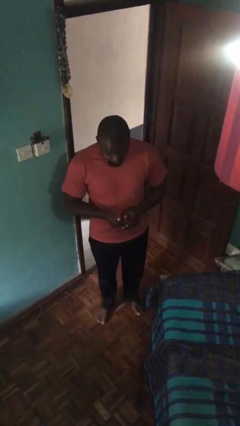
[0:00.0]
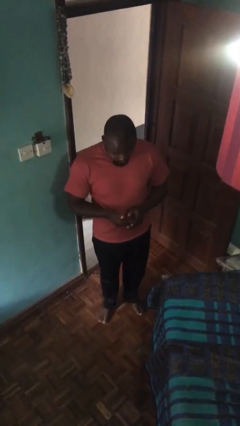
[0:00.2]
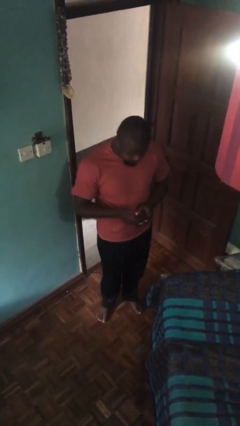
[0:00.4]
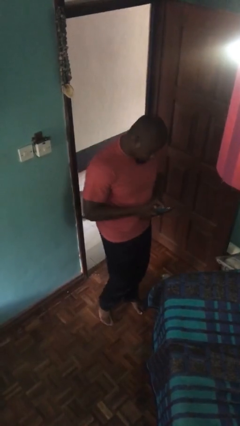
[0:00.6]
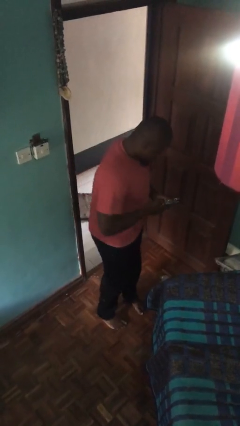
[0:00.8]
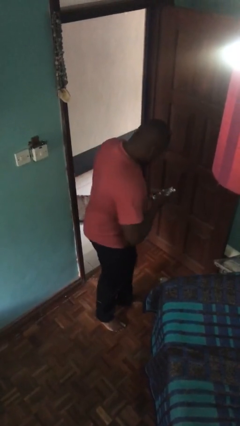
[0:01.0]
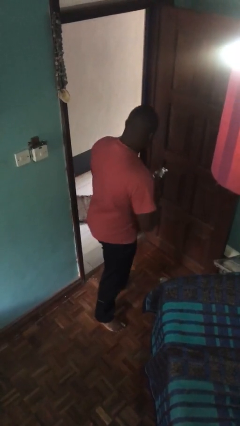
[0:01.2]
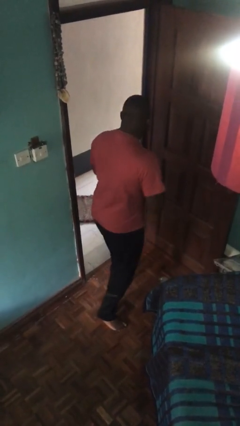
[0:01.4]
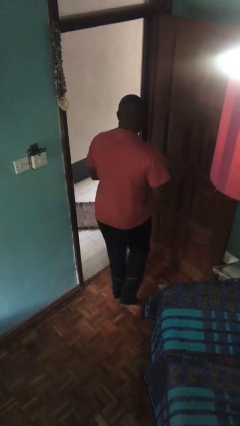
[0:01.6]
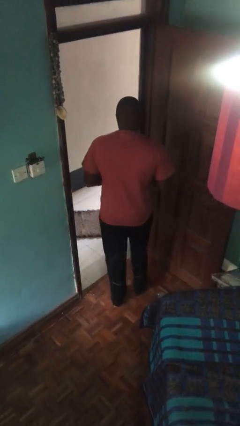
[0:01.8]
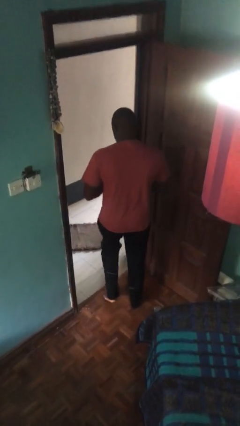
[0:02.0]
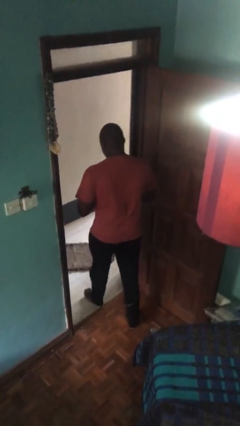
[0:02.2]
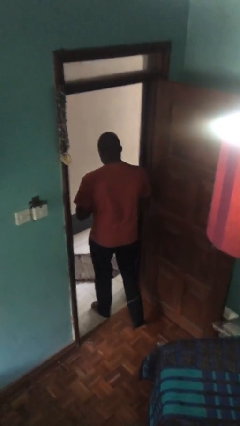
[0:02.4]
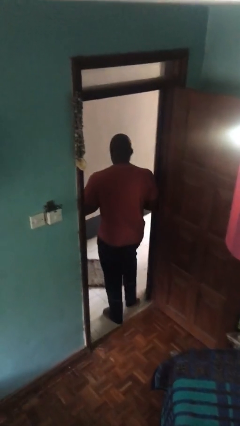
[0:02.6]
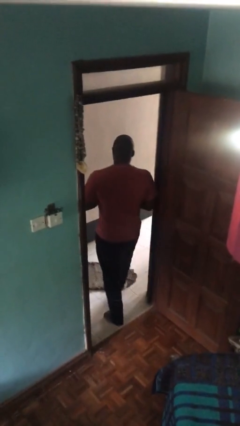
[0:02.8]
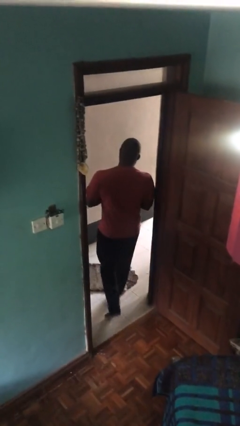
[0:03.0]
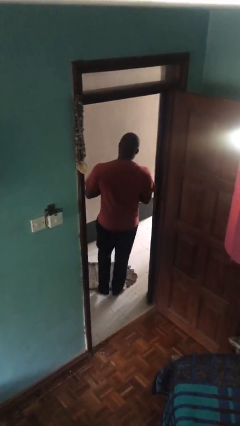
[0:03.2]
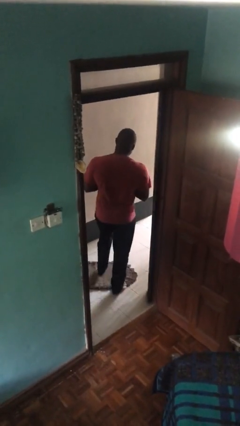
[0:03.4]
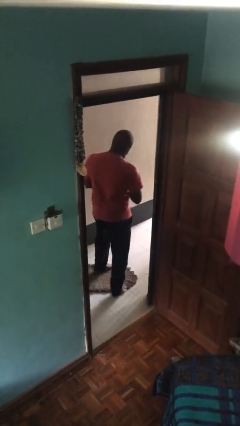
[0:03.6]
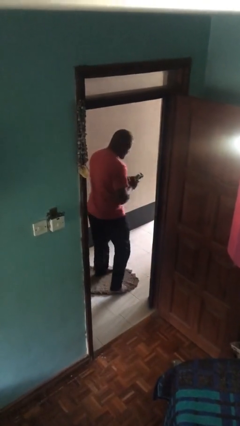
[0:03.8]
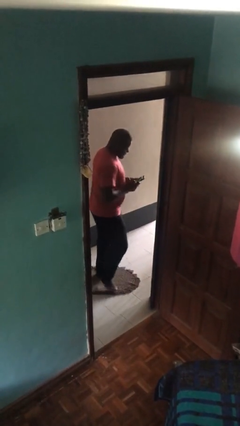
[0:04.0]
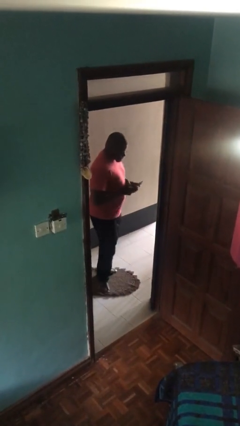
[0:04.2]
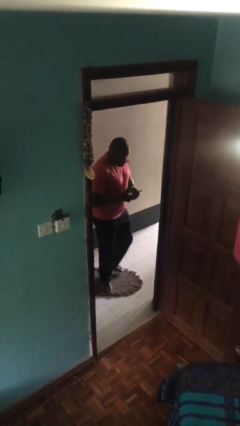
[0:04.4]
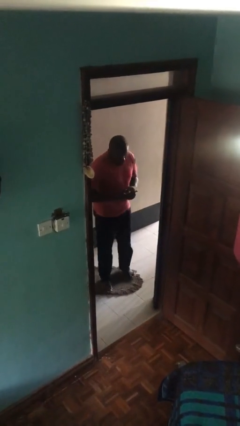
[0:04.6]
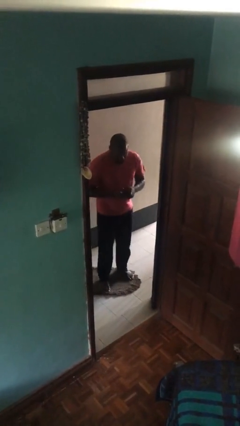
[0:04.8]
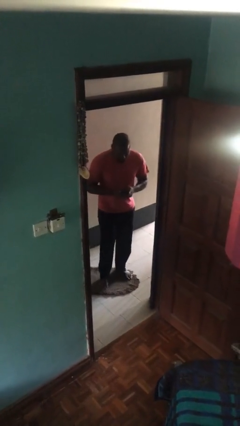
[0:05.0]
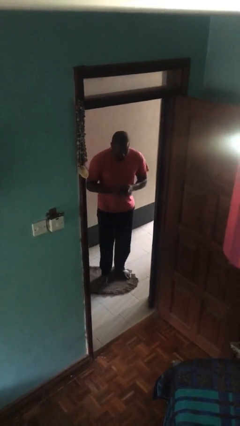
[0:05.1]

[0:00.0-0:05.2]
person exits scene through structure

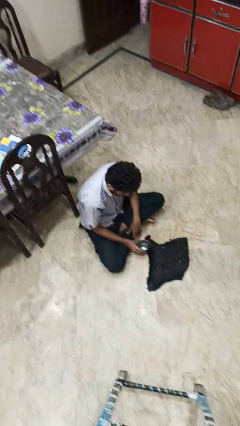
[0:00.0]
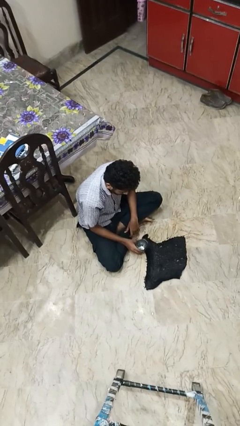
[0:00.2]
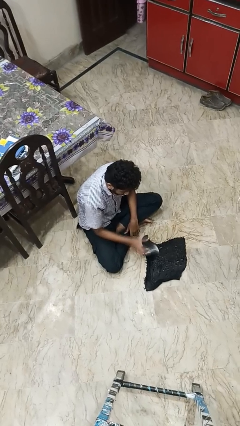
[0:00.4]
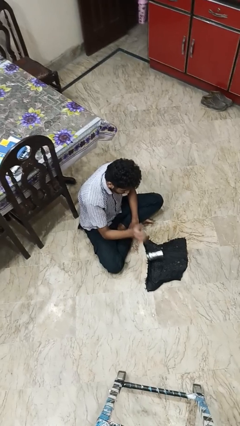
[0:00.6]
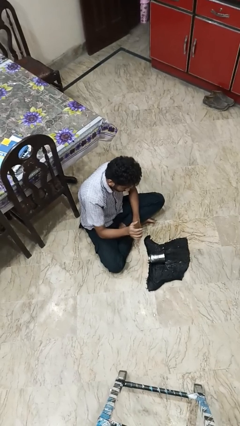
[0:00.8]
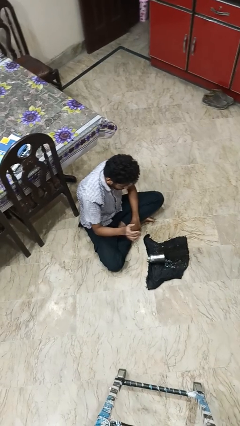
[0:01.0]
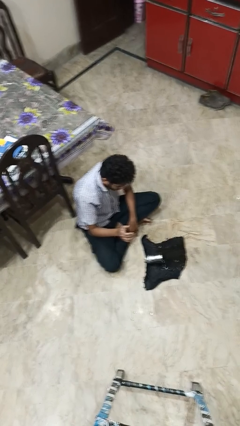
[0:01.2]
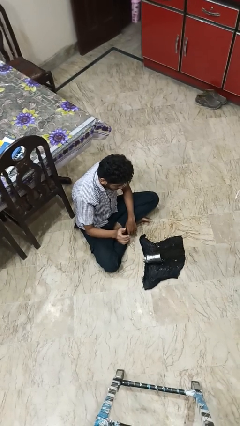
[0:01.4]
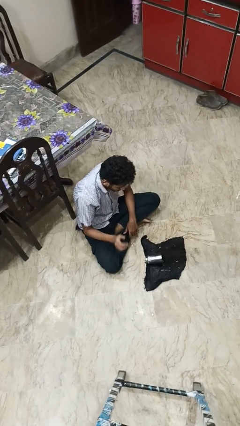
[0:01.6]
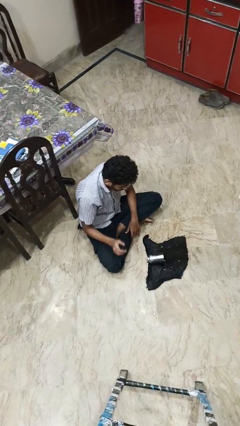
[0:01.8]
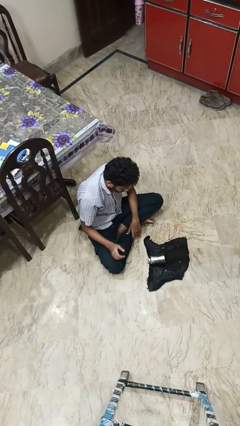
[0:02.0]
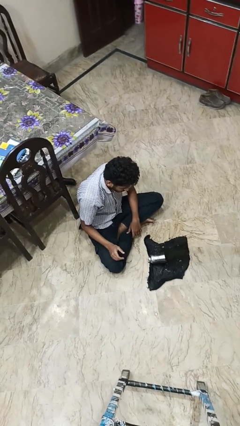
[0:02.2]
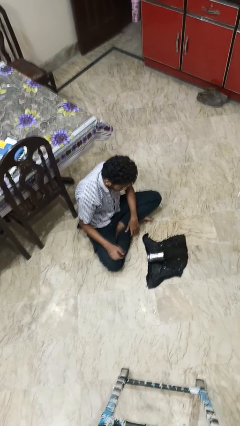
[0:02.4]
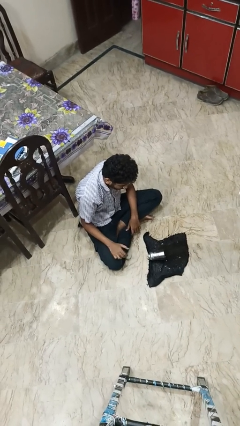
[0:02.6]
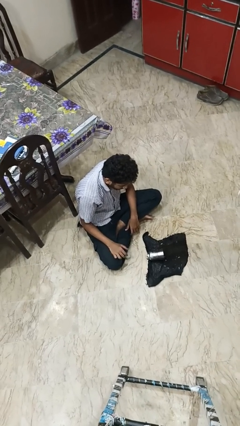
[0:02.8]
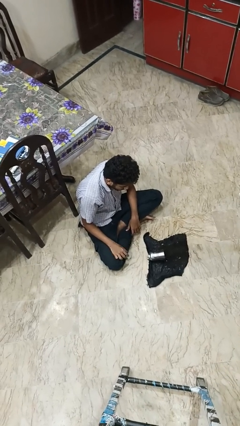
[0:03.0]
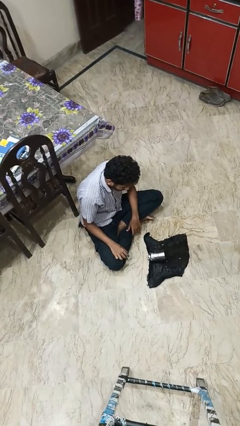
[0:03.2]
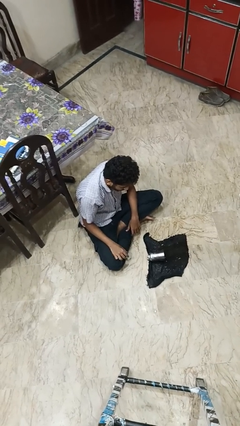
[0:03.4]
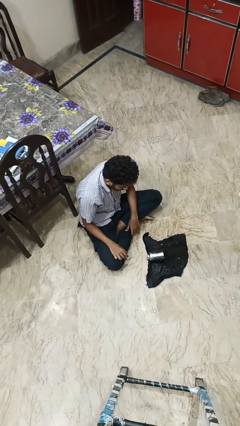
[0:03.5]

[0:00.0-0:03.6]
person spills on floor

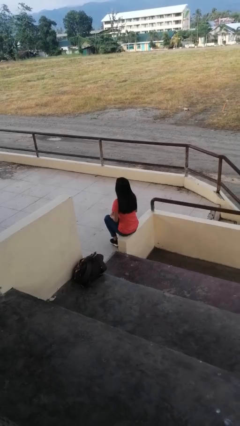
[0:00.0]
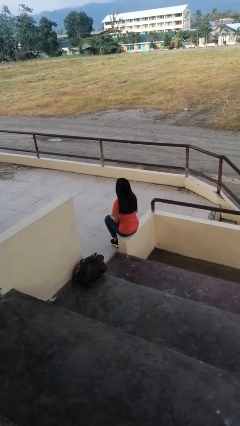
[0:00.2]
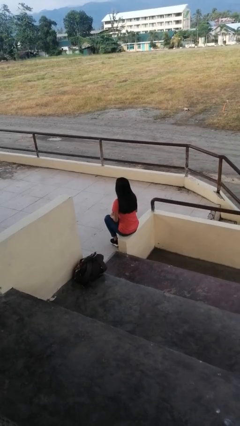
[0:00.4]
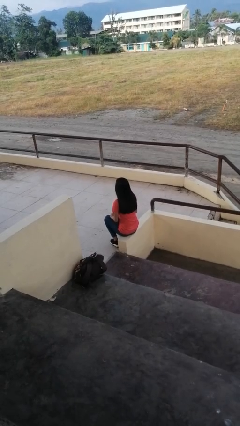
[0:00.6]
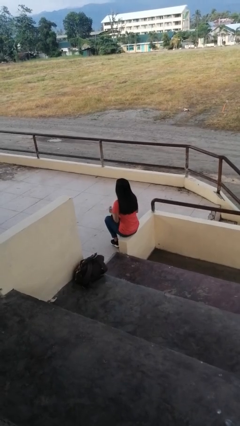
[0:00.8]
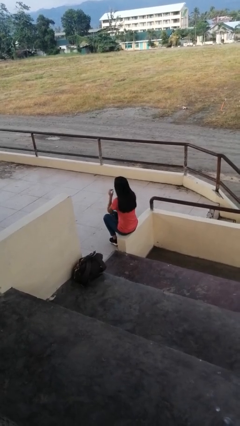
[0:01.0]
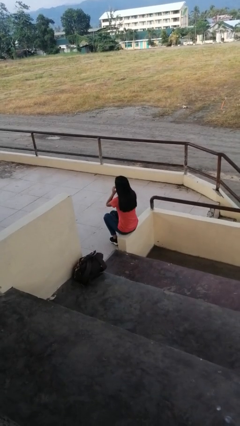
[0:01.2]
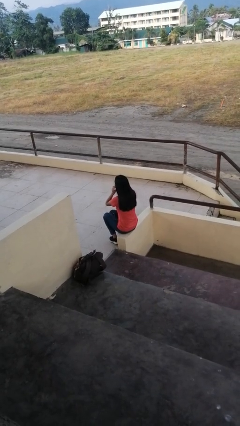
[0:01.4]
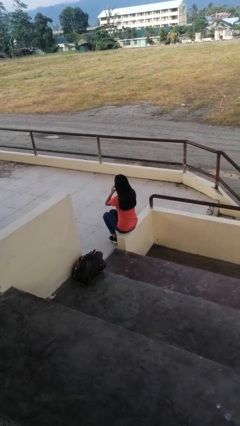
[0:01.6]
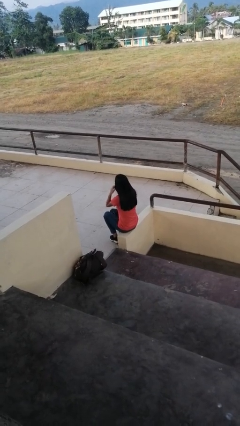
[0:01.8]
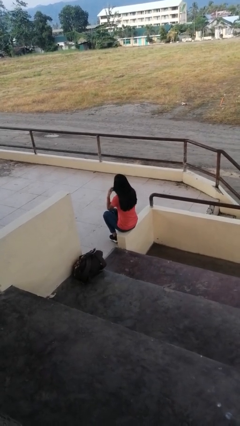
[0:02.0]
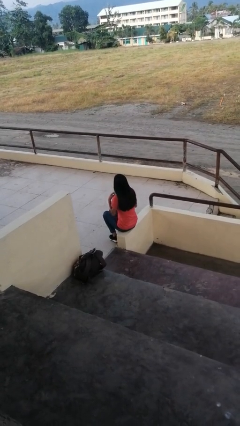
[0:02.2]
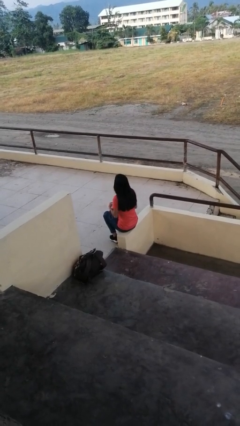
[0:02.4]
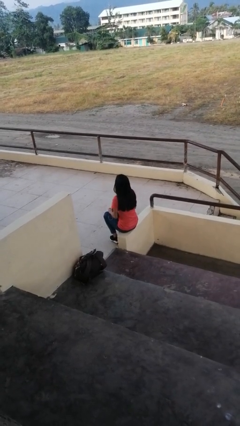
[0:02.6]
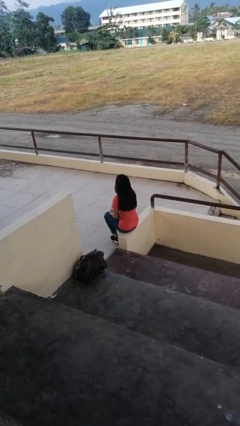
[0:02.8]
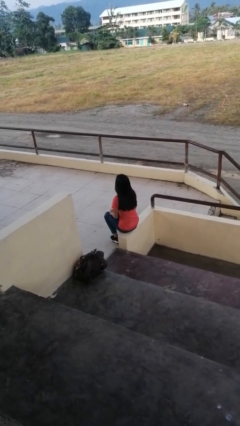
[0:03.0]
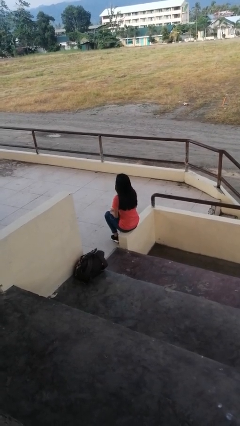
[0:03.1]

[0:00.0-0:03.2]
person takes off headphones

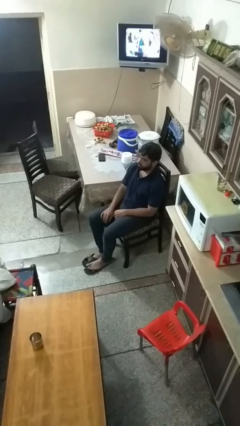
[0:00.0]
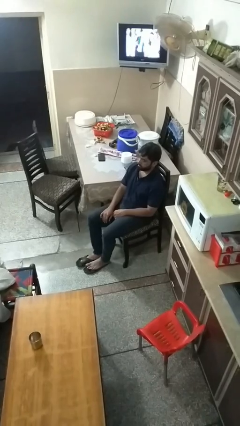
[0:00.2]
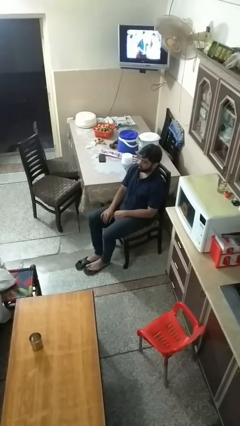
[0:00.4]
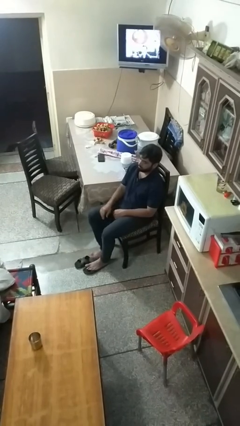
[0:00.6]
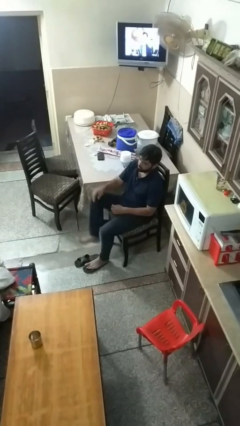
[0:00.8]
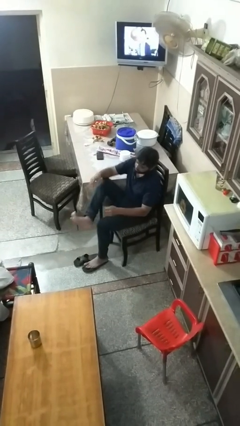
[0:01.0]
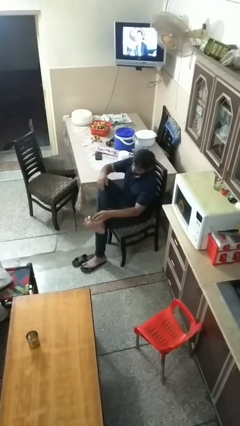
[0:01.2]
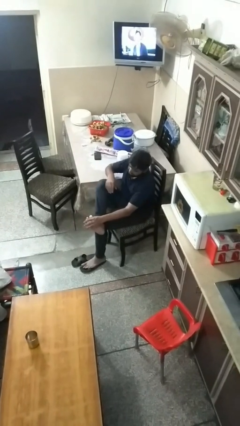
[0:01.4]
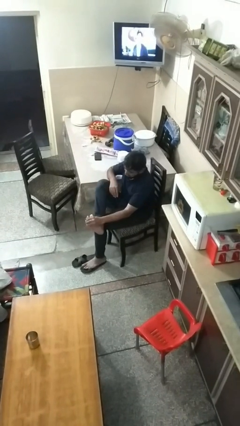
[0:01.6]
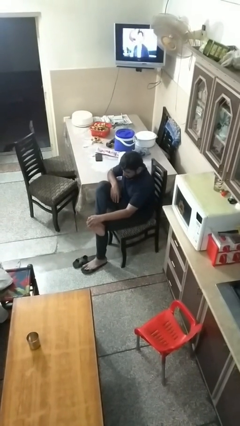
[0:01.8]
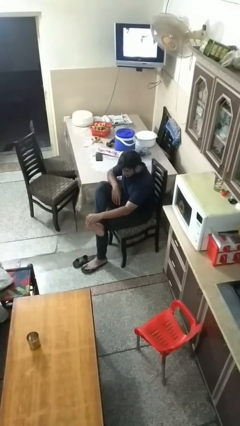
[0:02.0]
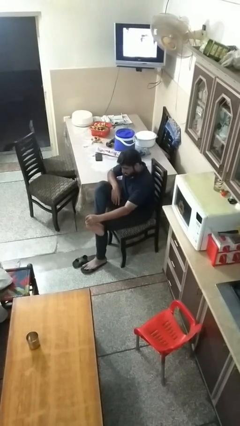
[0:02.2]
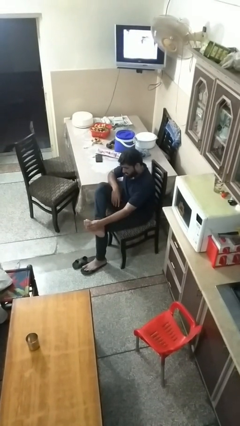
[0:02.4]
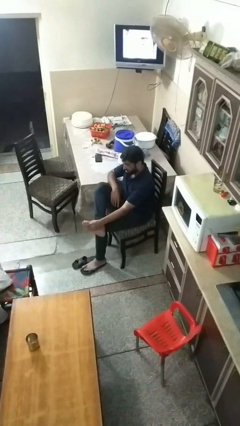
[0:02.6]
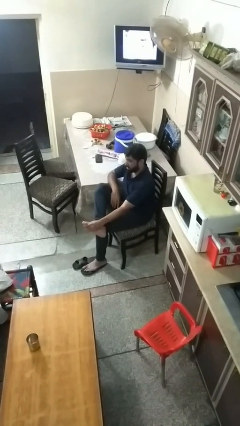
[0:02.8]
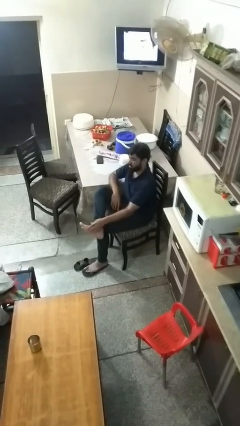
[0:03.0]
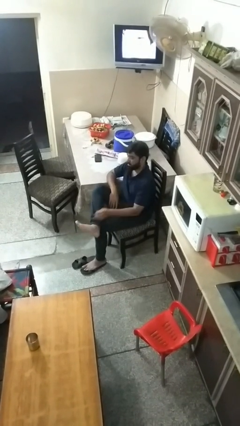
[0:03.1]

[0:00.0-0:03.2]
person rubs foot

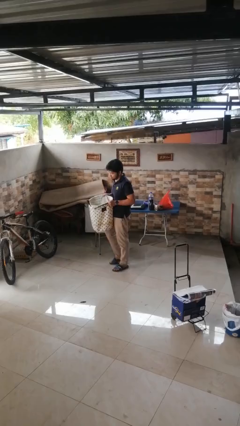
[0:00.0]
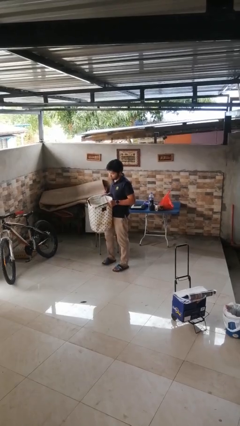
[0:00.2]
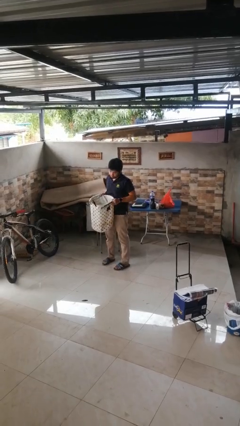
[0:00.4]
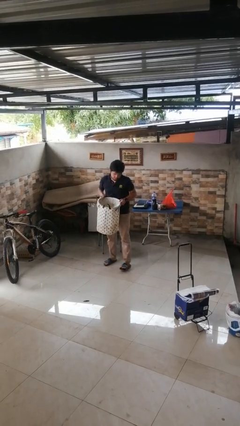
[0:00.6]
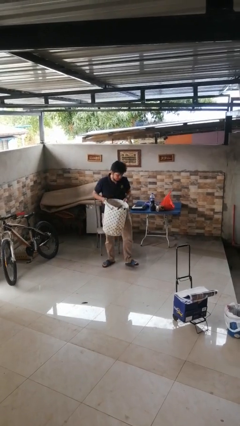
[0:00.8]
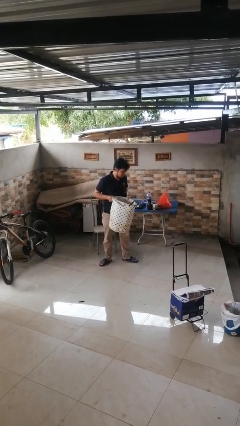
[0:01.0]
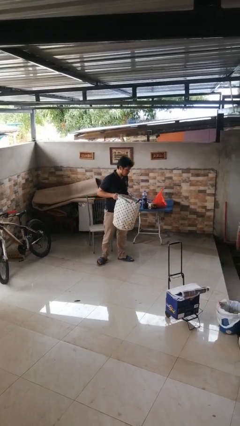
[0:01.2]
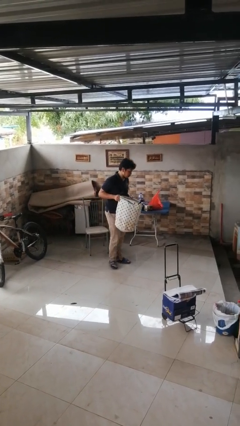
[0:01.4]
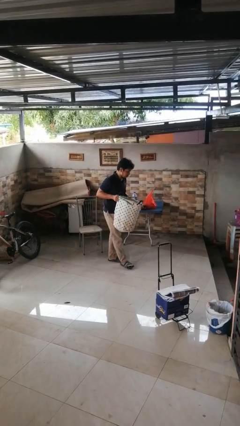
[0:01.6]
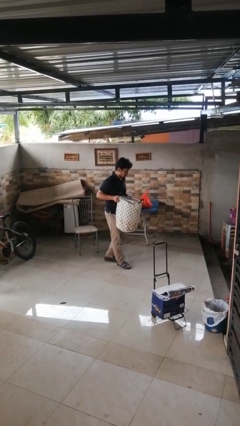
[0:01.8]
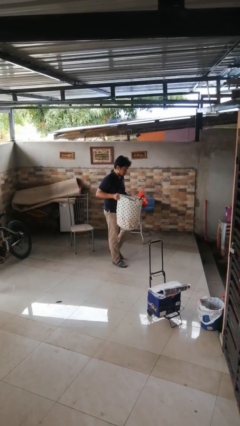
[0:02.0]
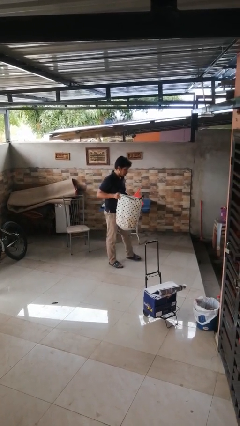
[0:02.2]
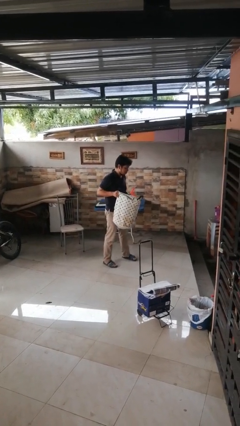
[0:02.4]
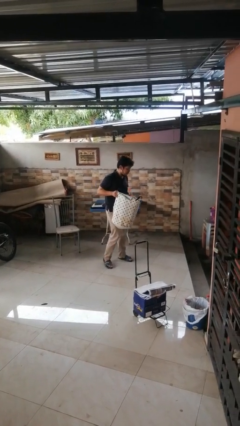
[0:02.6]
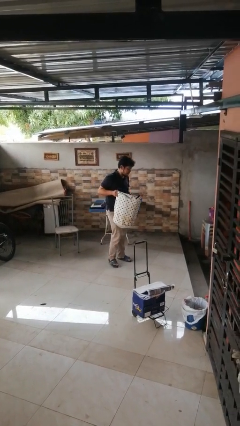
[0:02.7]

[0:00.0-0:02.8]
person carries laundry basket
